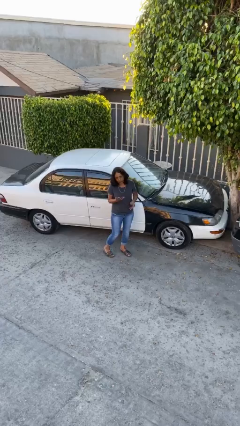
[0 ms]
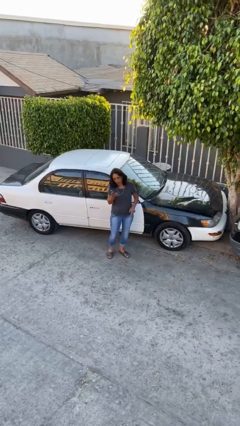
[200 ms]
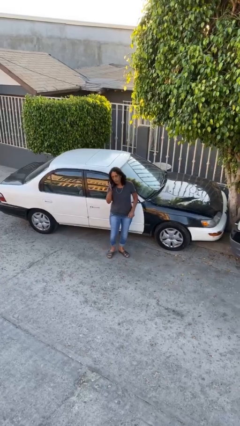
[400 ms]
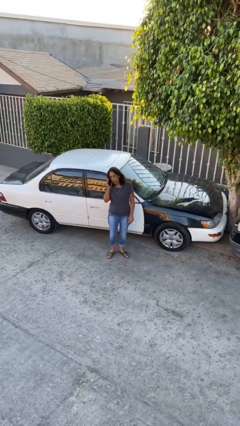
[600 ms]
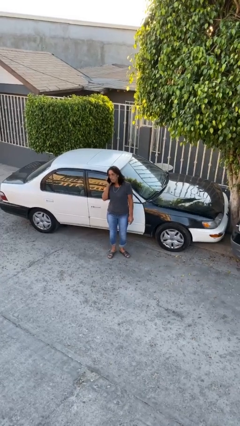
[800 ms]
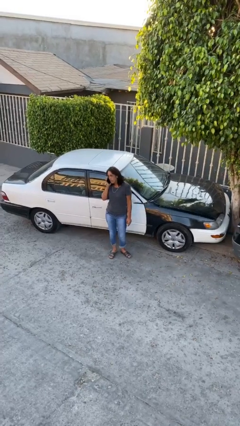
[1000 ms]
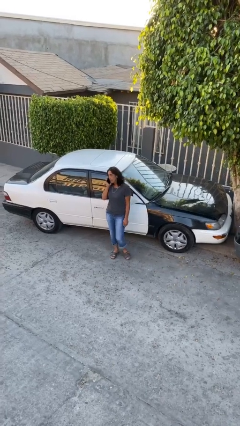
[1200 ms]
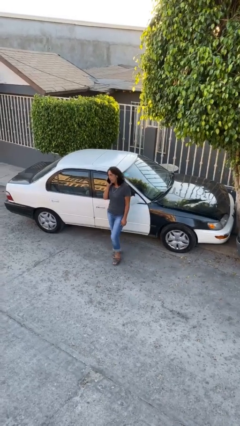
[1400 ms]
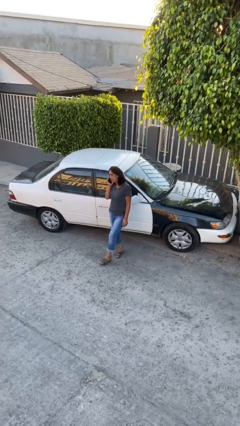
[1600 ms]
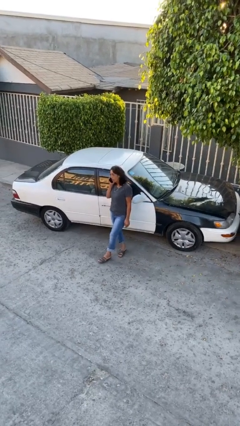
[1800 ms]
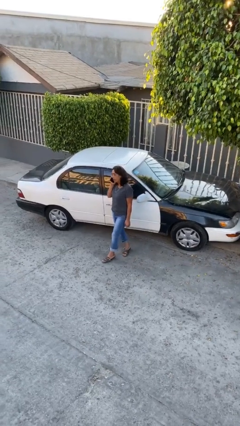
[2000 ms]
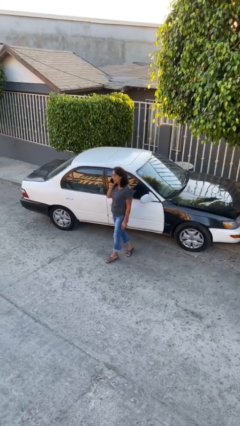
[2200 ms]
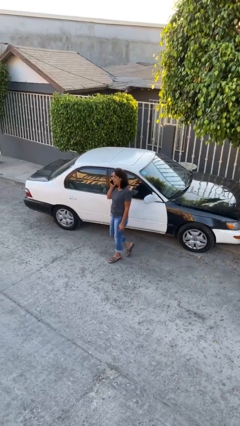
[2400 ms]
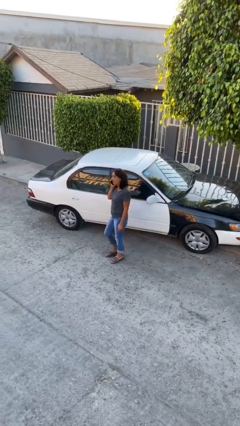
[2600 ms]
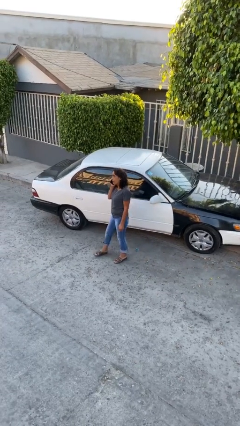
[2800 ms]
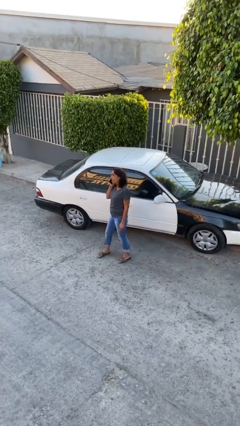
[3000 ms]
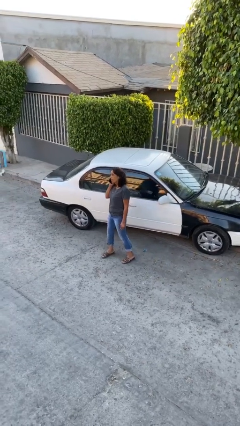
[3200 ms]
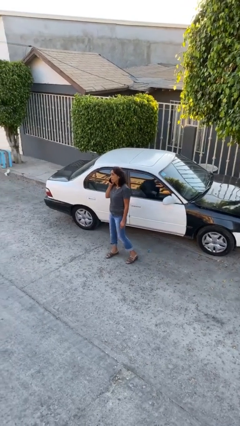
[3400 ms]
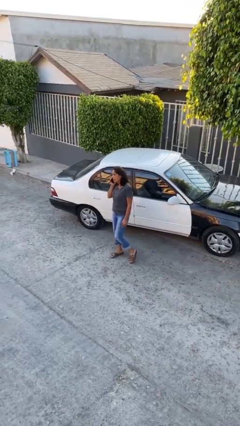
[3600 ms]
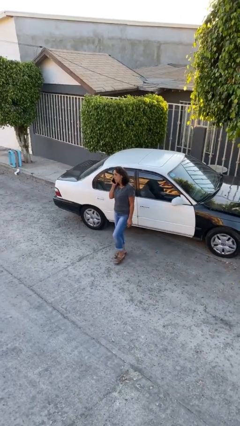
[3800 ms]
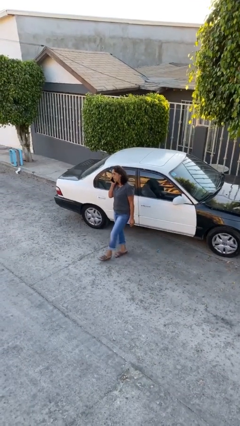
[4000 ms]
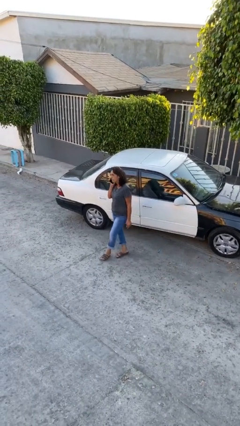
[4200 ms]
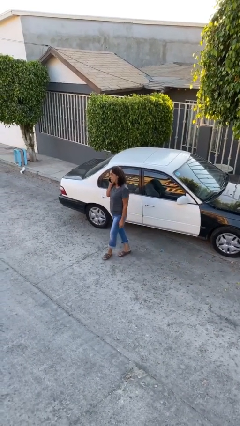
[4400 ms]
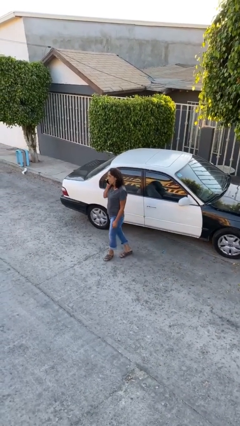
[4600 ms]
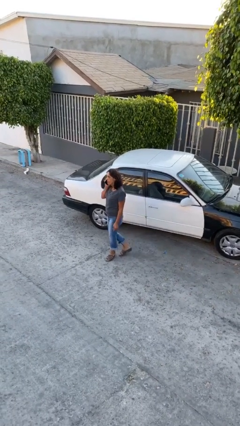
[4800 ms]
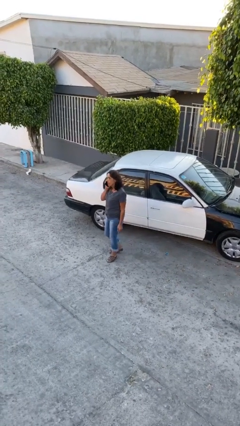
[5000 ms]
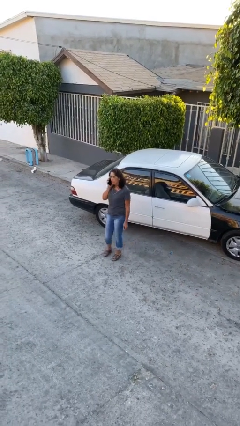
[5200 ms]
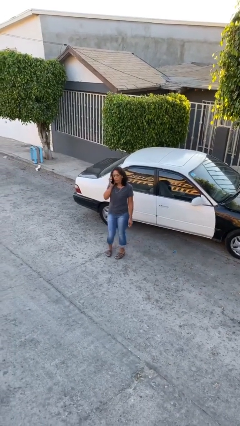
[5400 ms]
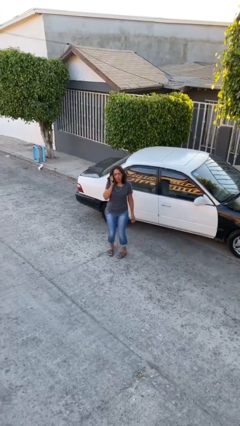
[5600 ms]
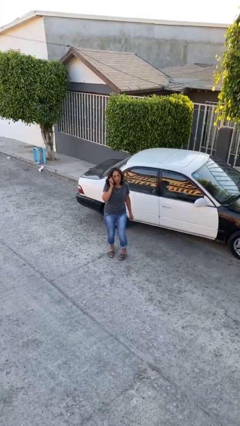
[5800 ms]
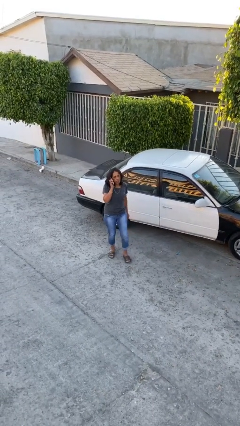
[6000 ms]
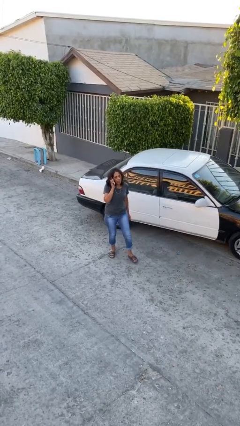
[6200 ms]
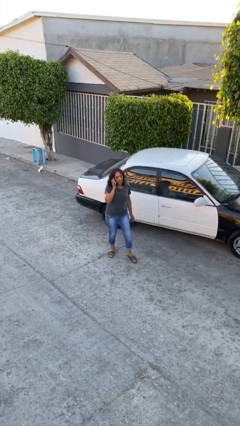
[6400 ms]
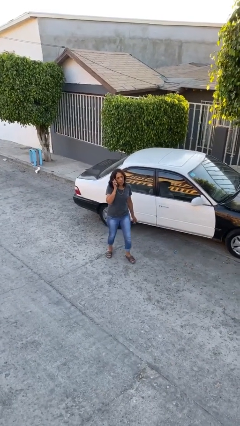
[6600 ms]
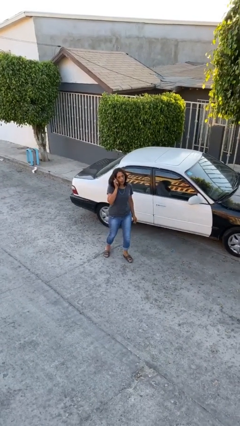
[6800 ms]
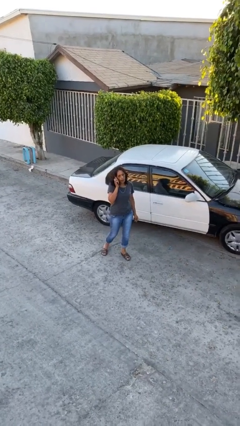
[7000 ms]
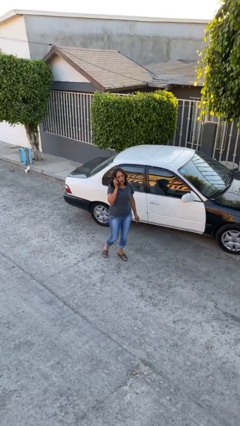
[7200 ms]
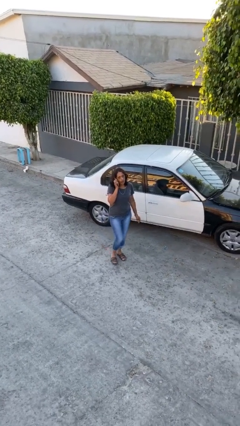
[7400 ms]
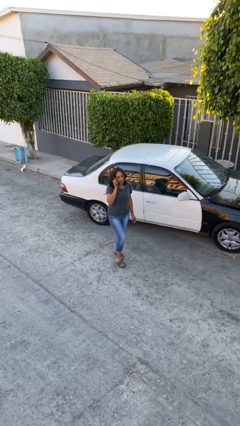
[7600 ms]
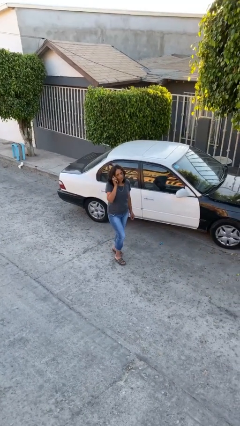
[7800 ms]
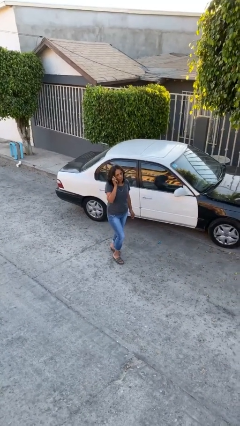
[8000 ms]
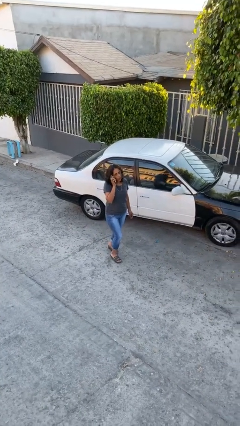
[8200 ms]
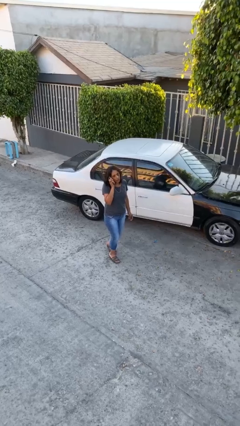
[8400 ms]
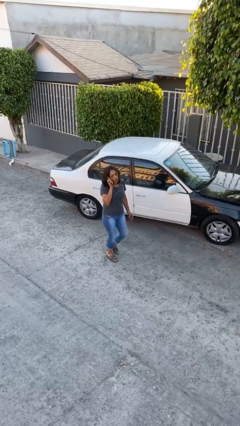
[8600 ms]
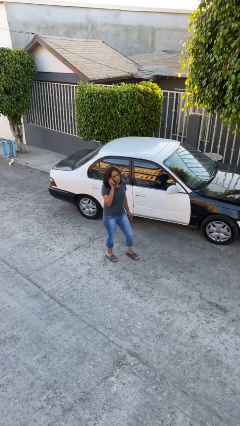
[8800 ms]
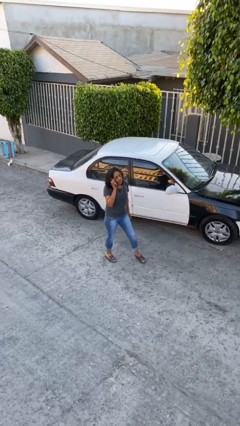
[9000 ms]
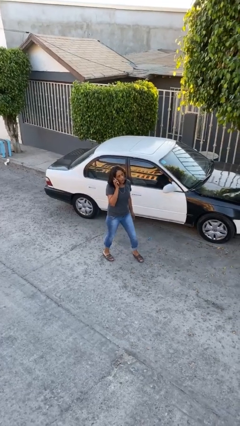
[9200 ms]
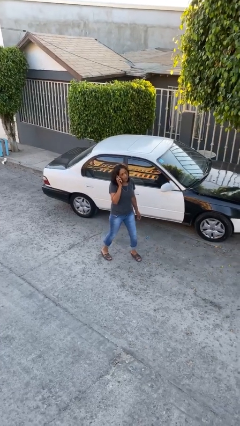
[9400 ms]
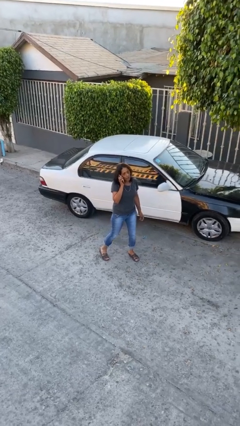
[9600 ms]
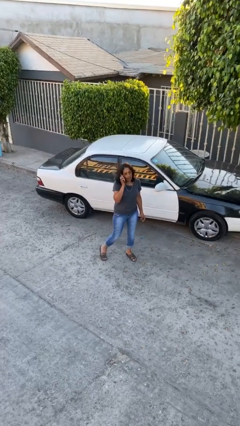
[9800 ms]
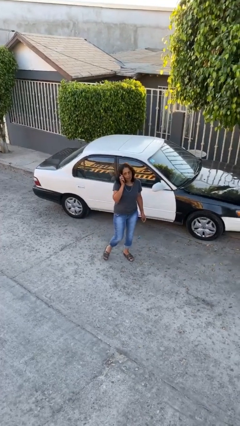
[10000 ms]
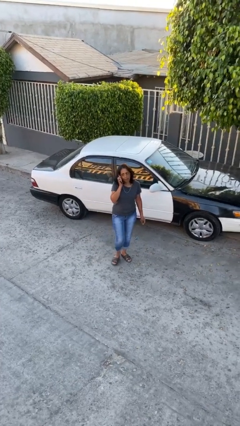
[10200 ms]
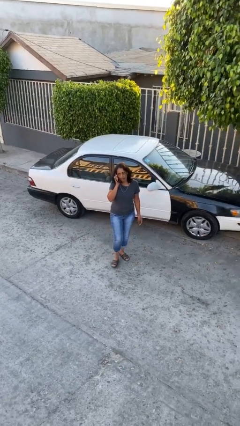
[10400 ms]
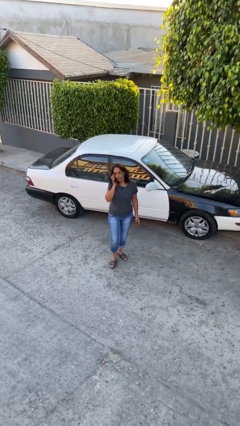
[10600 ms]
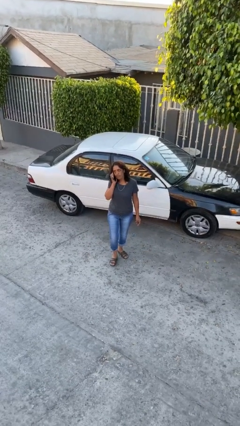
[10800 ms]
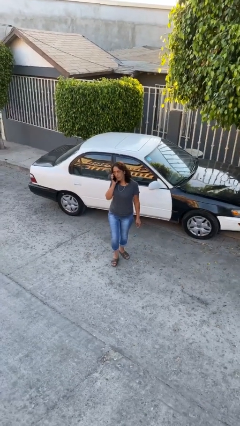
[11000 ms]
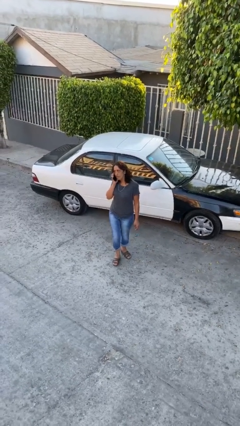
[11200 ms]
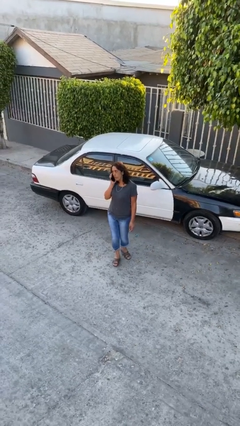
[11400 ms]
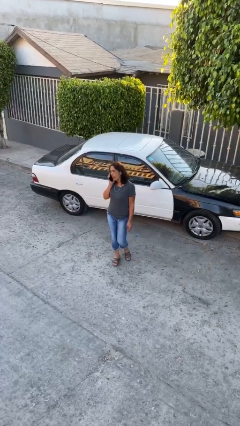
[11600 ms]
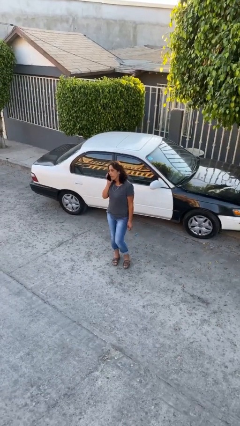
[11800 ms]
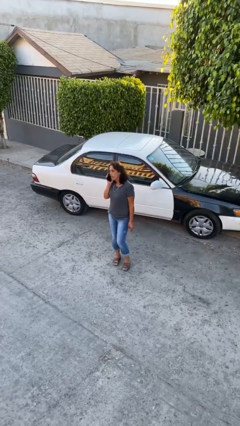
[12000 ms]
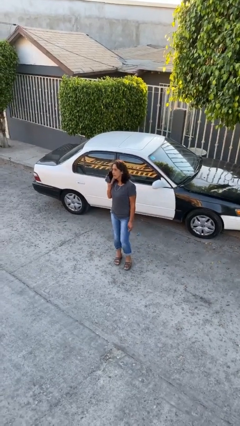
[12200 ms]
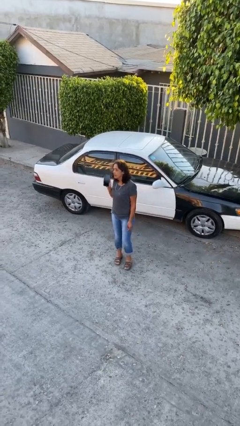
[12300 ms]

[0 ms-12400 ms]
person talks on phone

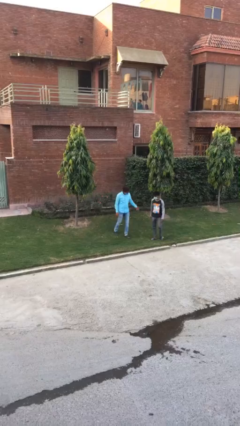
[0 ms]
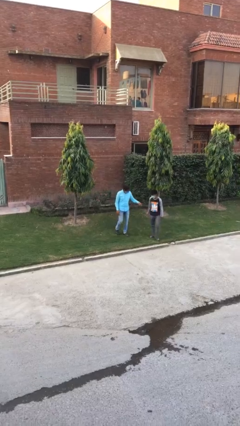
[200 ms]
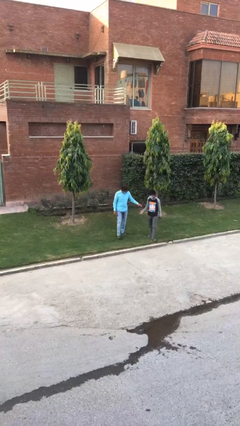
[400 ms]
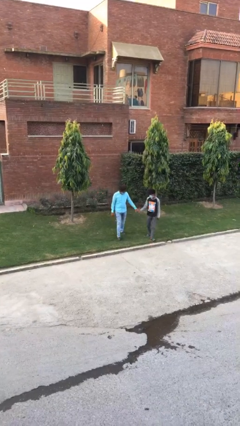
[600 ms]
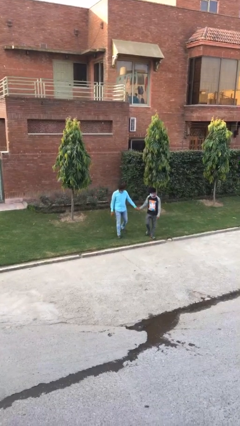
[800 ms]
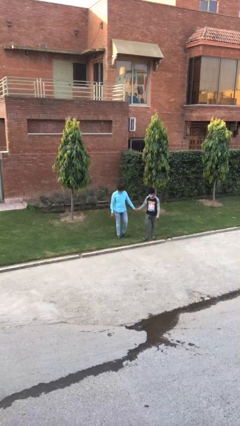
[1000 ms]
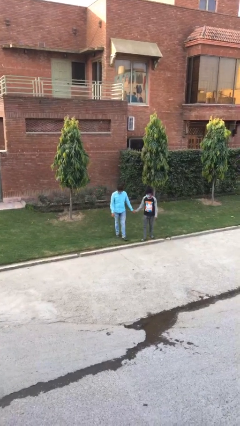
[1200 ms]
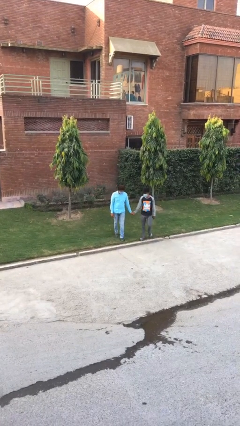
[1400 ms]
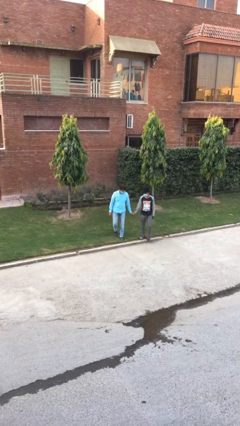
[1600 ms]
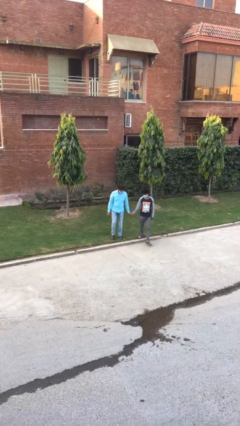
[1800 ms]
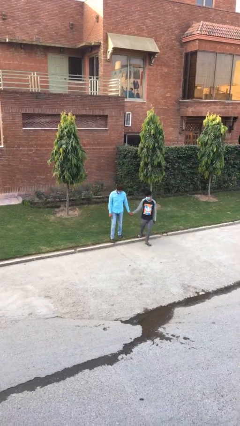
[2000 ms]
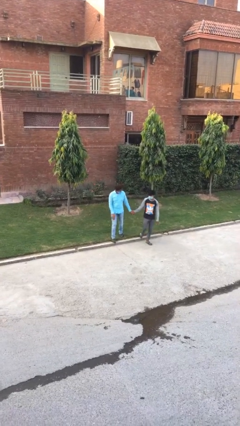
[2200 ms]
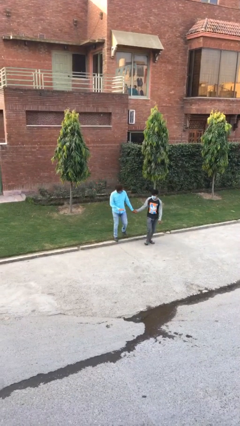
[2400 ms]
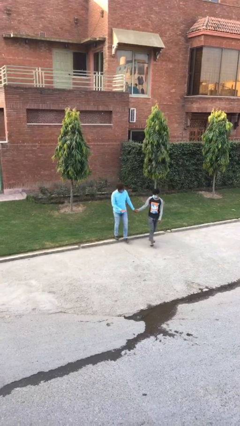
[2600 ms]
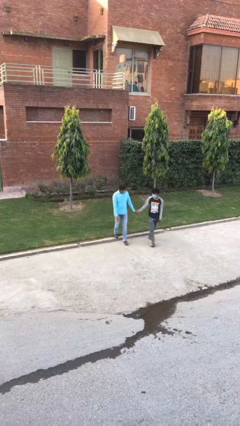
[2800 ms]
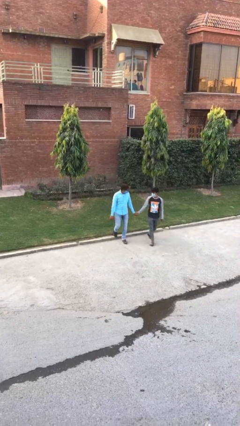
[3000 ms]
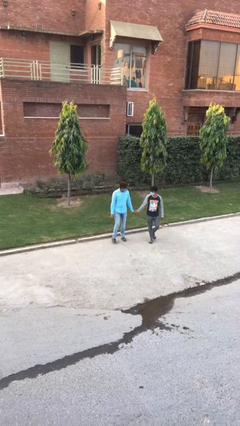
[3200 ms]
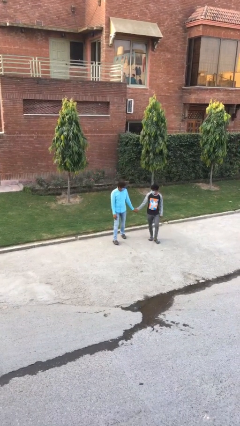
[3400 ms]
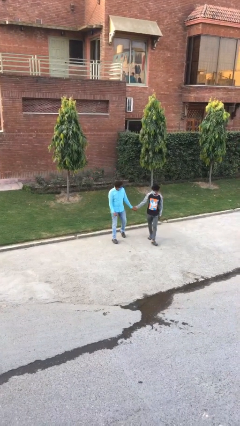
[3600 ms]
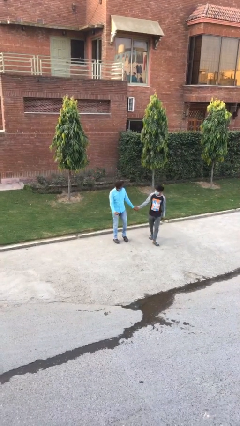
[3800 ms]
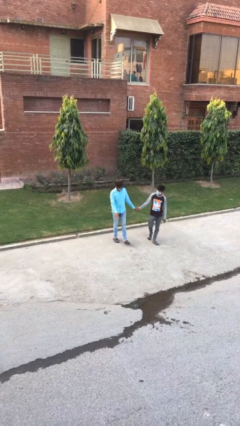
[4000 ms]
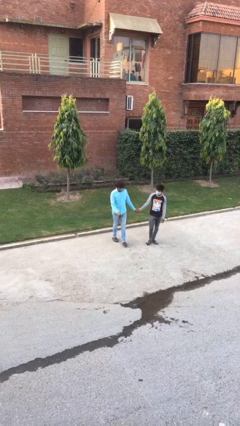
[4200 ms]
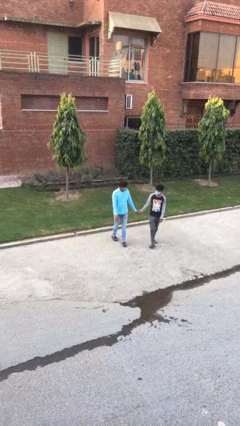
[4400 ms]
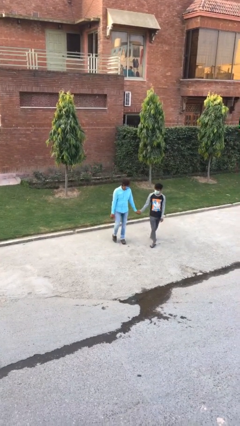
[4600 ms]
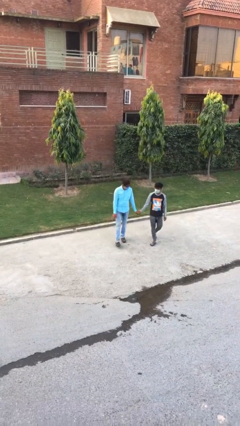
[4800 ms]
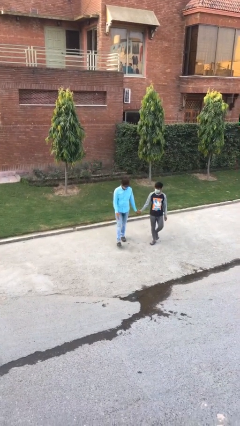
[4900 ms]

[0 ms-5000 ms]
person holds hand

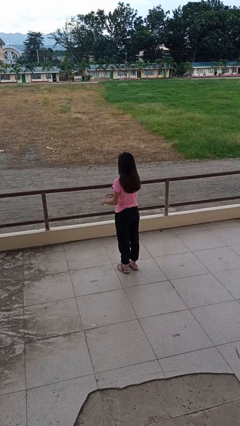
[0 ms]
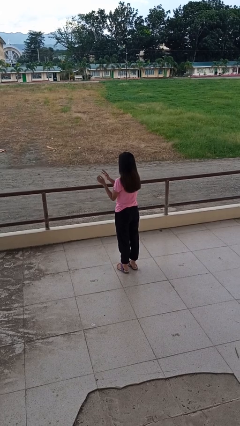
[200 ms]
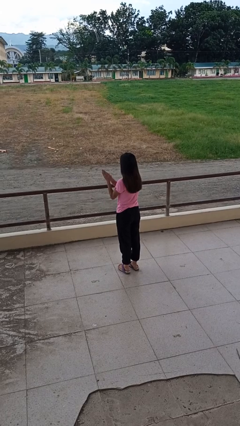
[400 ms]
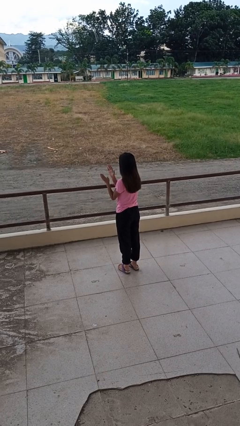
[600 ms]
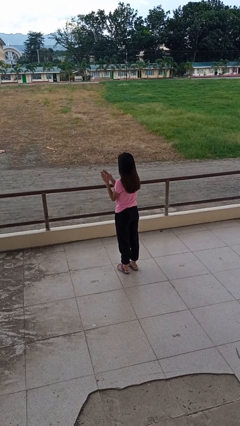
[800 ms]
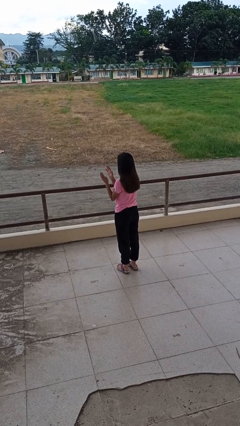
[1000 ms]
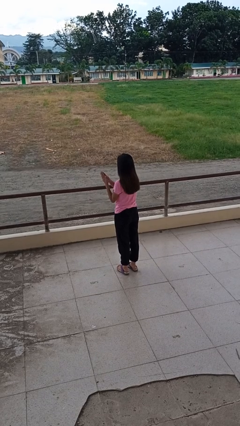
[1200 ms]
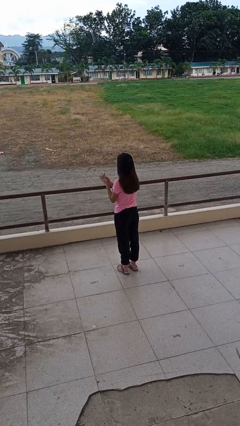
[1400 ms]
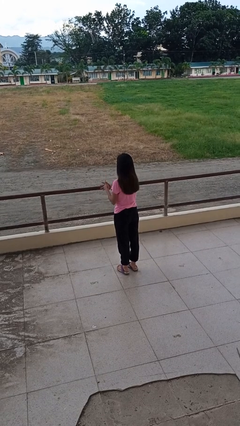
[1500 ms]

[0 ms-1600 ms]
person claps hands
